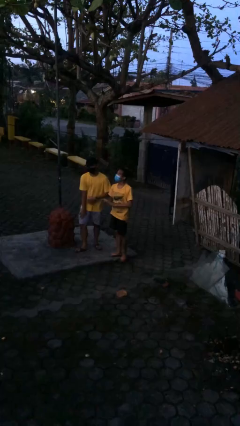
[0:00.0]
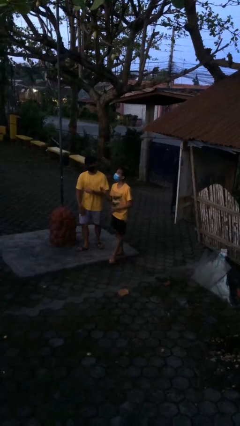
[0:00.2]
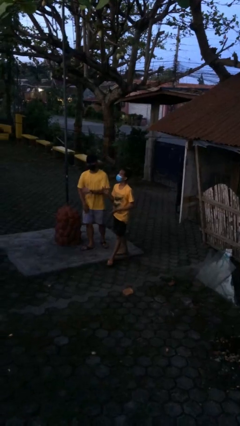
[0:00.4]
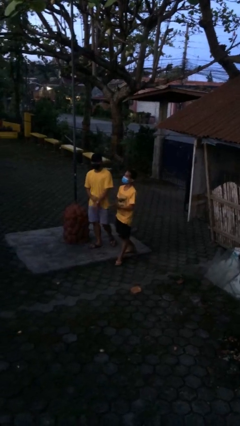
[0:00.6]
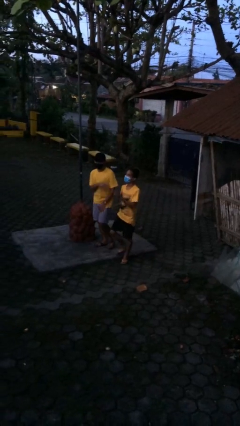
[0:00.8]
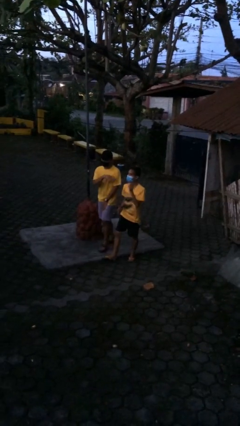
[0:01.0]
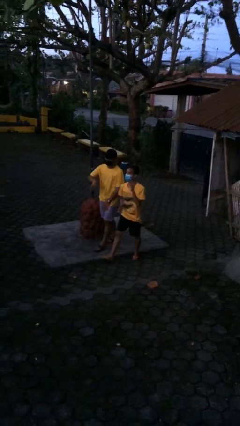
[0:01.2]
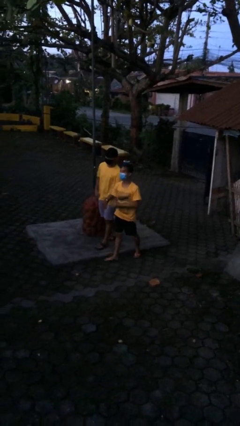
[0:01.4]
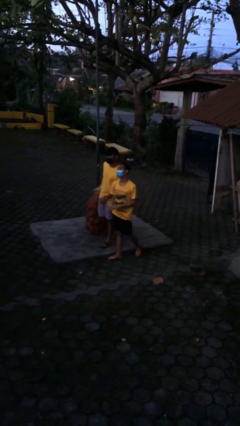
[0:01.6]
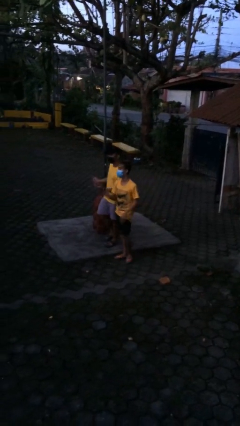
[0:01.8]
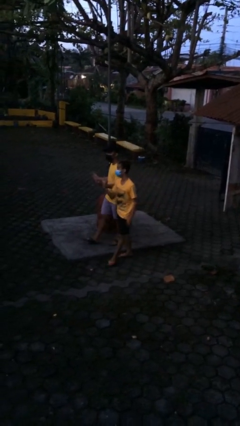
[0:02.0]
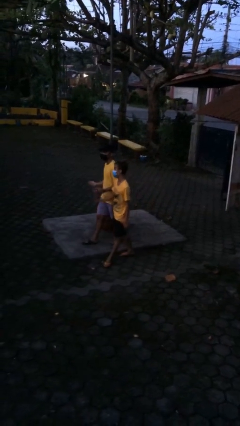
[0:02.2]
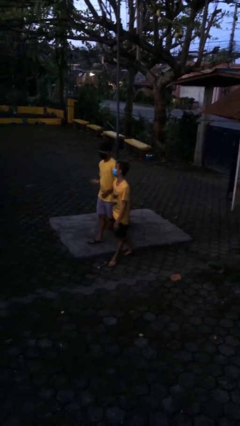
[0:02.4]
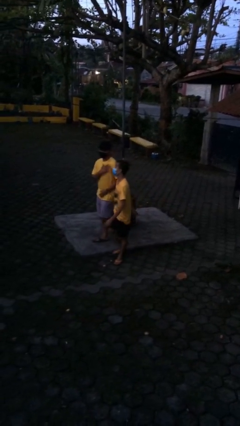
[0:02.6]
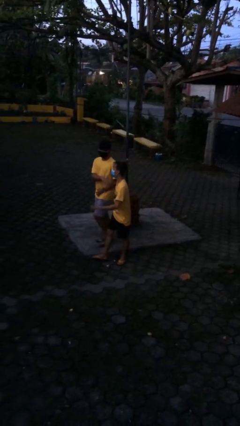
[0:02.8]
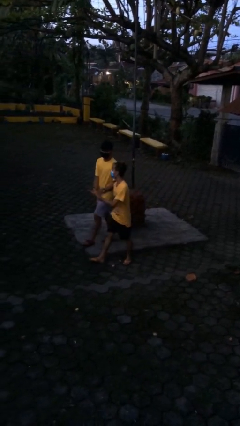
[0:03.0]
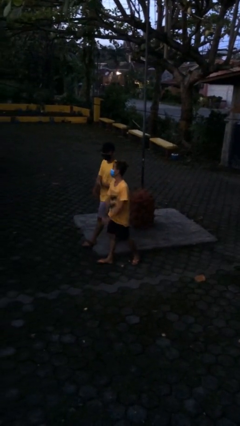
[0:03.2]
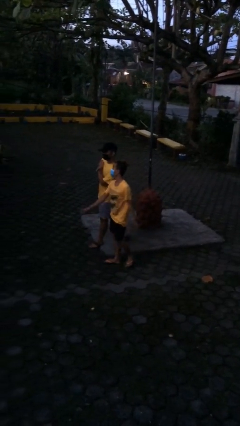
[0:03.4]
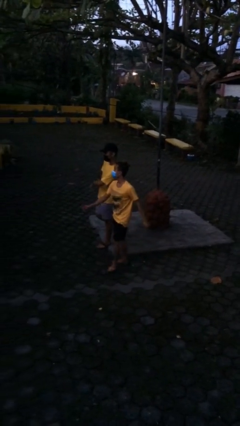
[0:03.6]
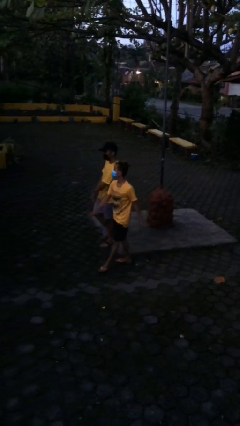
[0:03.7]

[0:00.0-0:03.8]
person talks to person

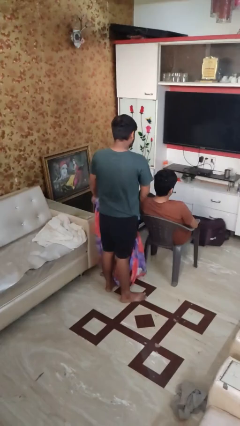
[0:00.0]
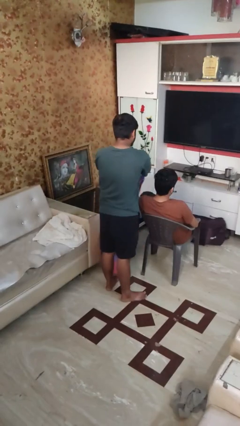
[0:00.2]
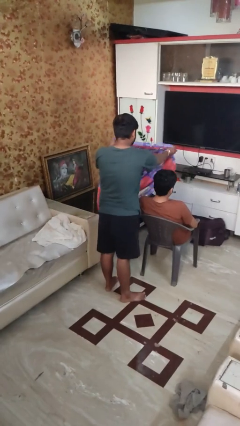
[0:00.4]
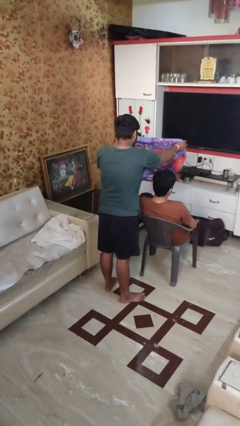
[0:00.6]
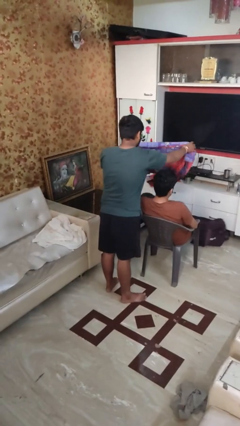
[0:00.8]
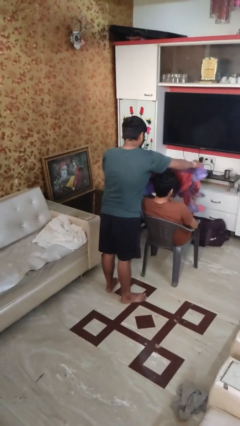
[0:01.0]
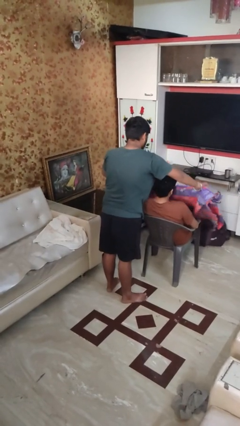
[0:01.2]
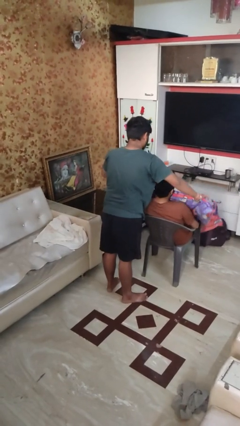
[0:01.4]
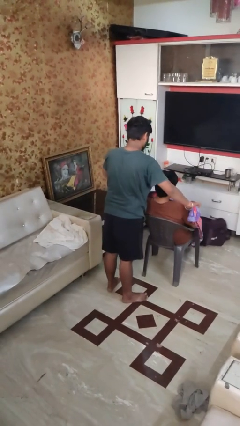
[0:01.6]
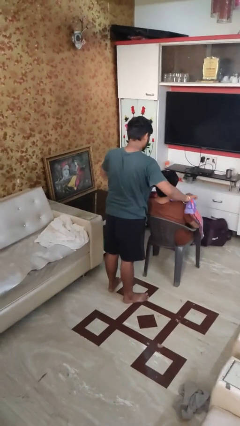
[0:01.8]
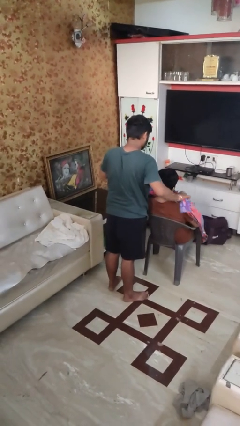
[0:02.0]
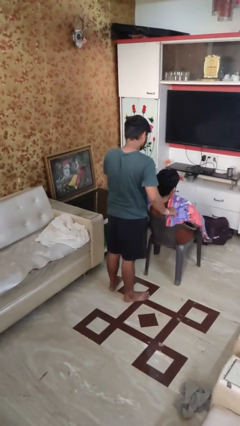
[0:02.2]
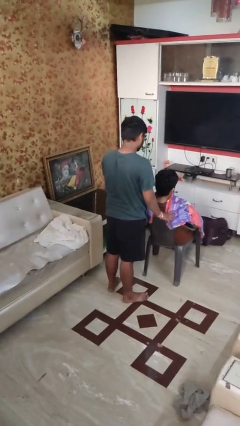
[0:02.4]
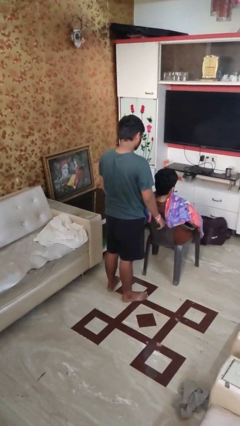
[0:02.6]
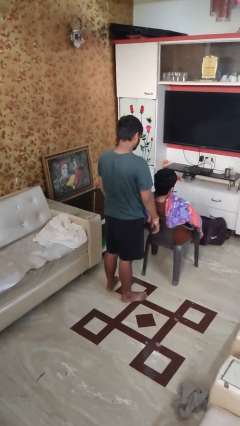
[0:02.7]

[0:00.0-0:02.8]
person covers friend with blanket

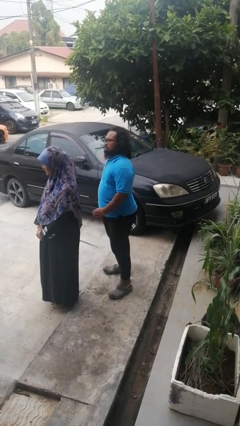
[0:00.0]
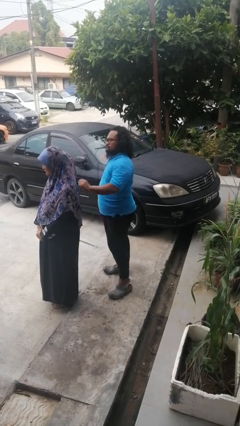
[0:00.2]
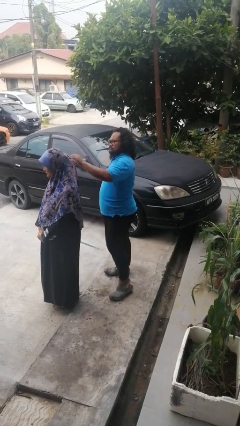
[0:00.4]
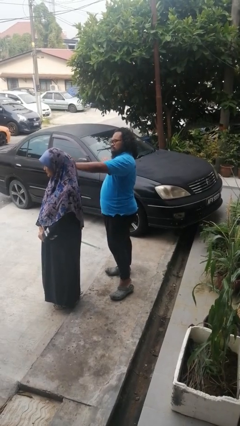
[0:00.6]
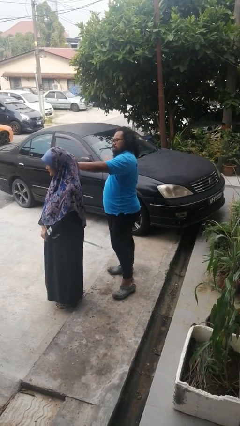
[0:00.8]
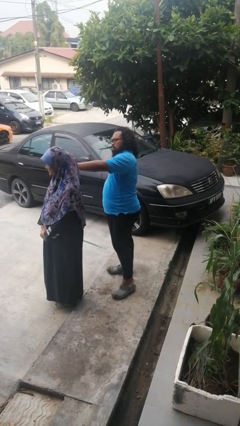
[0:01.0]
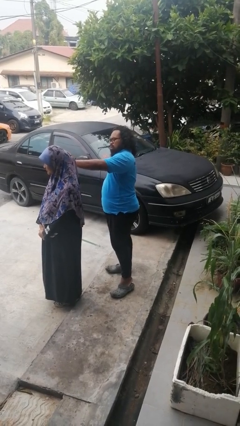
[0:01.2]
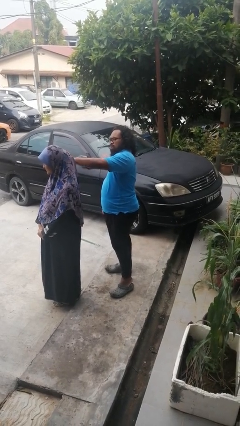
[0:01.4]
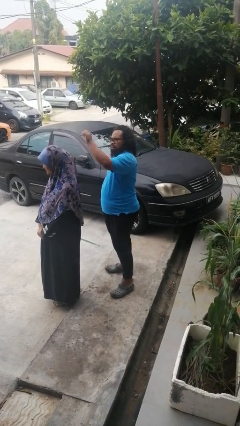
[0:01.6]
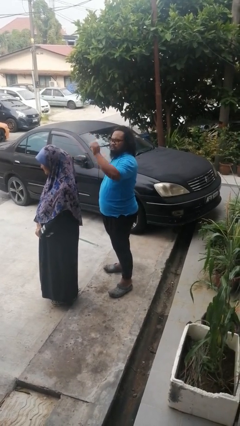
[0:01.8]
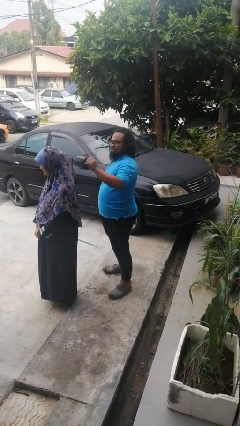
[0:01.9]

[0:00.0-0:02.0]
person touches back of person

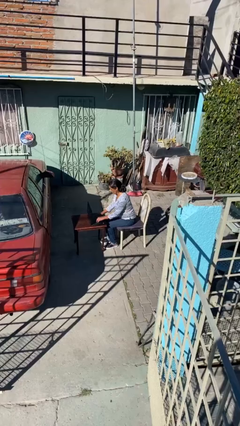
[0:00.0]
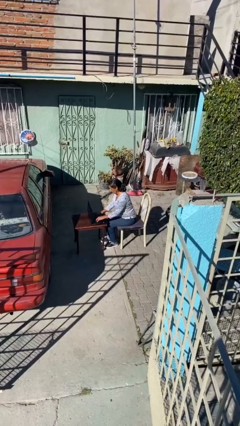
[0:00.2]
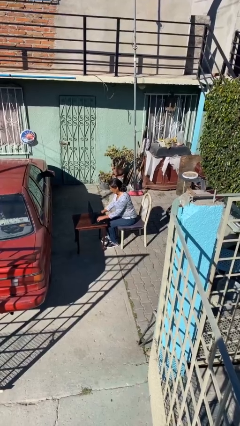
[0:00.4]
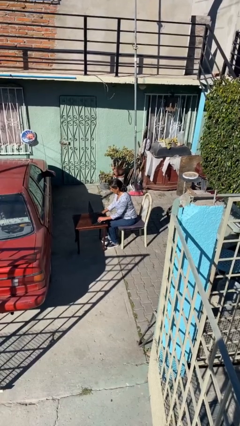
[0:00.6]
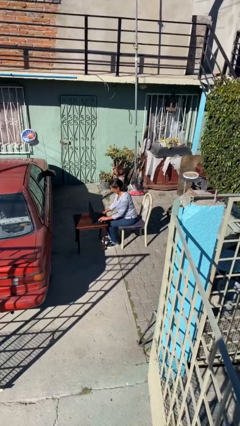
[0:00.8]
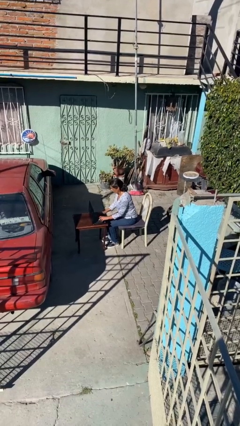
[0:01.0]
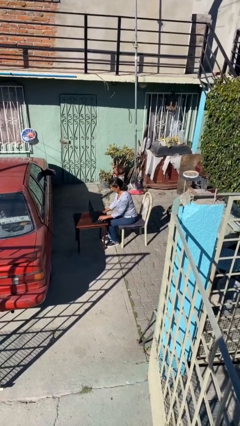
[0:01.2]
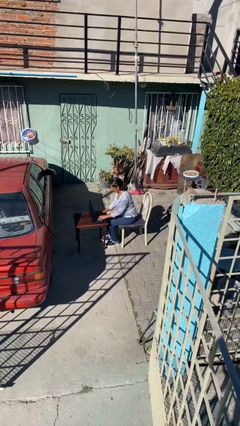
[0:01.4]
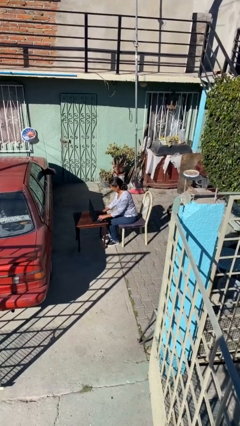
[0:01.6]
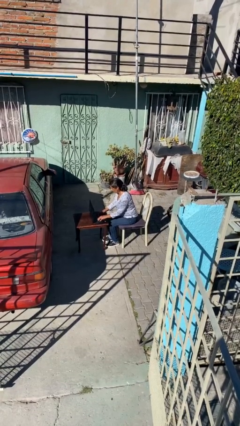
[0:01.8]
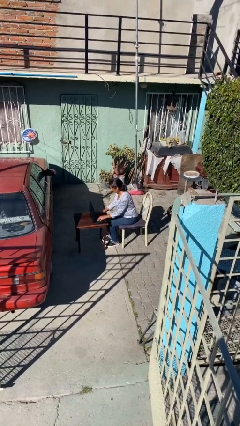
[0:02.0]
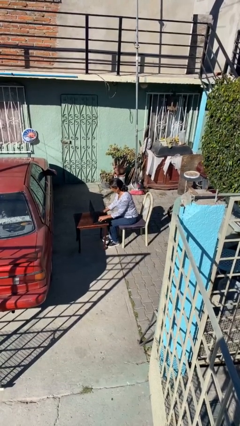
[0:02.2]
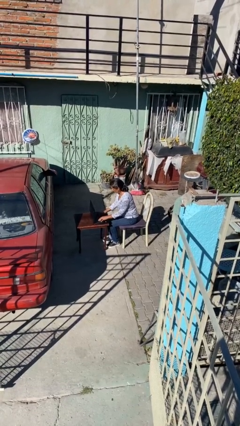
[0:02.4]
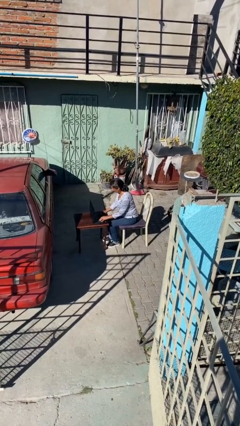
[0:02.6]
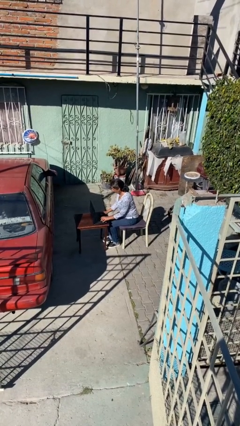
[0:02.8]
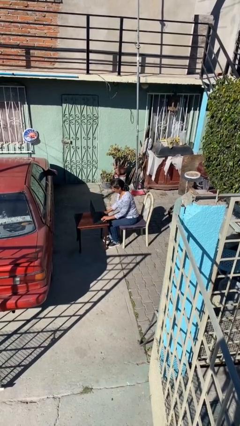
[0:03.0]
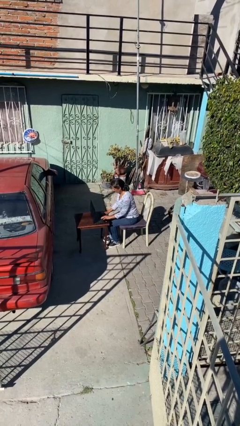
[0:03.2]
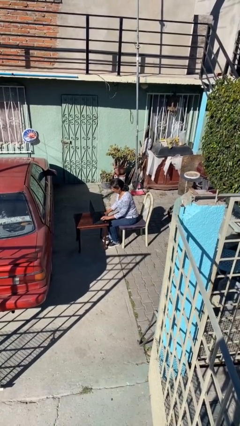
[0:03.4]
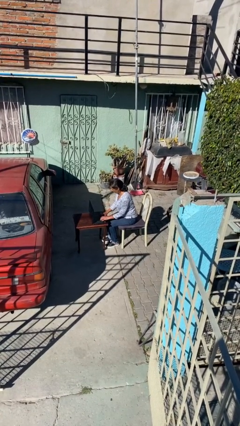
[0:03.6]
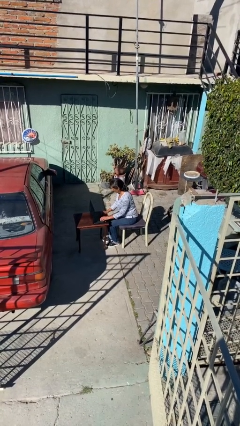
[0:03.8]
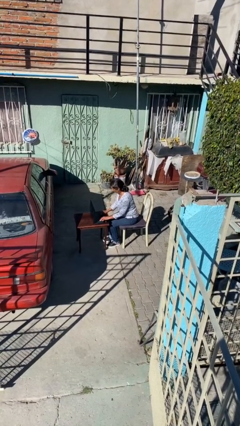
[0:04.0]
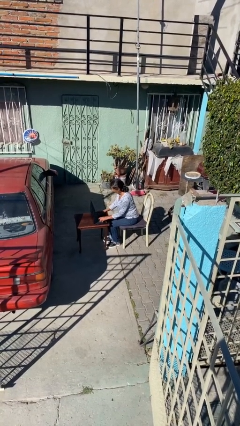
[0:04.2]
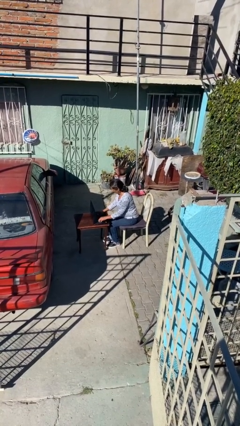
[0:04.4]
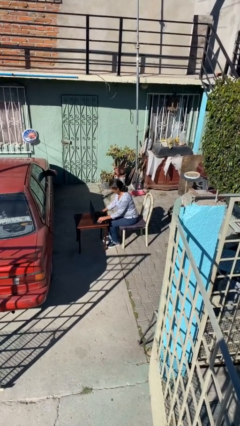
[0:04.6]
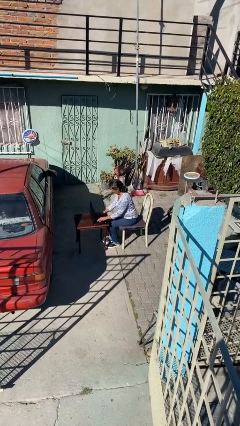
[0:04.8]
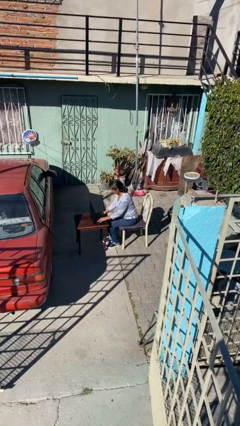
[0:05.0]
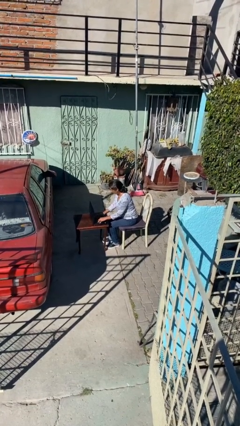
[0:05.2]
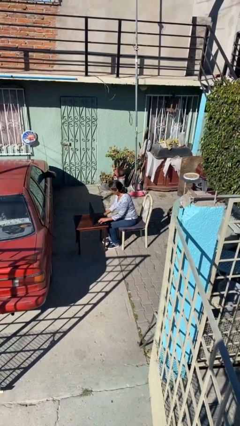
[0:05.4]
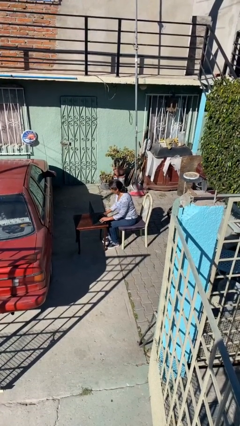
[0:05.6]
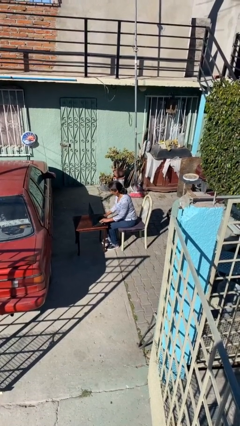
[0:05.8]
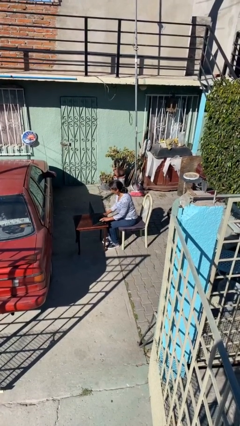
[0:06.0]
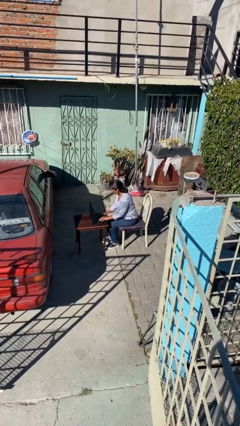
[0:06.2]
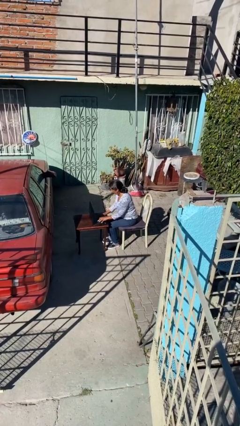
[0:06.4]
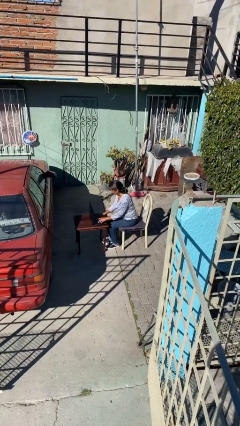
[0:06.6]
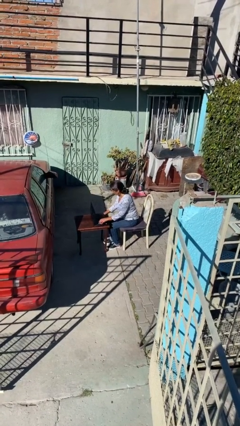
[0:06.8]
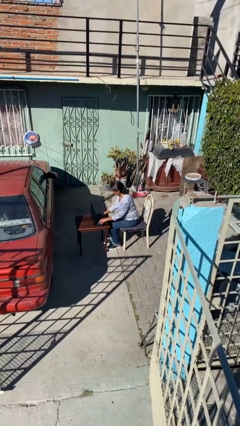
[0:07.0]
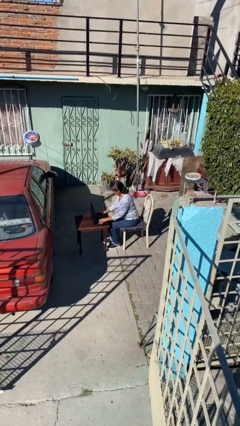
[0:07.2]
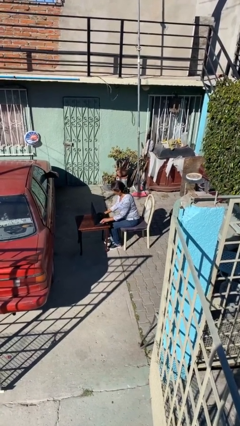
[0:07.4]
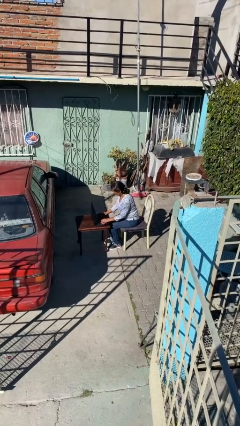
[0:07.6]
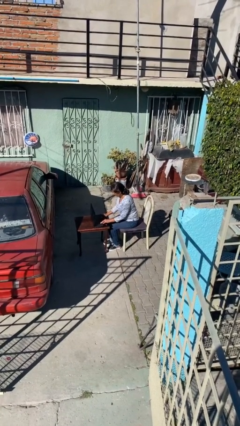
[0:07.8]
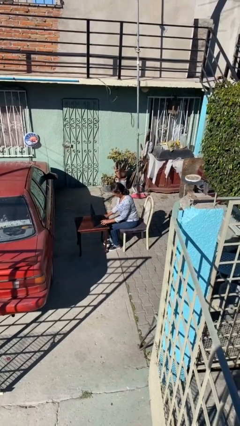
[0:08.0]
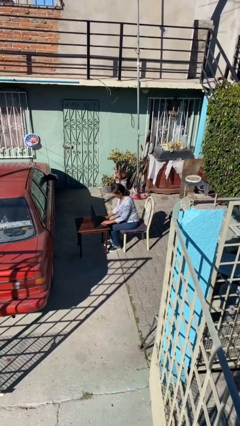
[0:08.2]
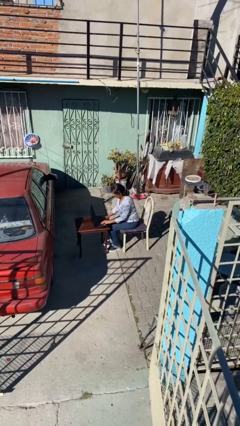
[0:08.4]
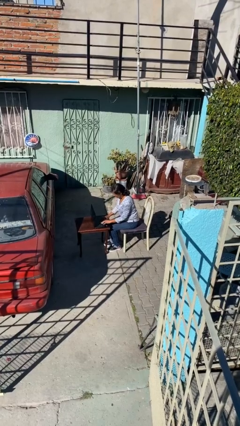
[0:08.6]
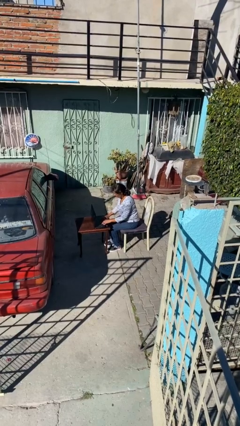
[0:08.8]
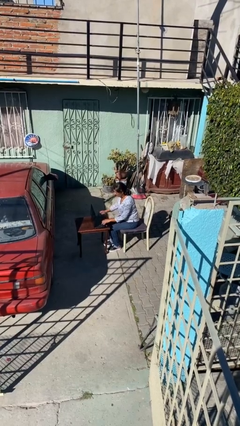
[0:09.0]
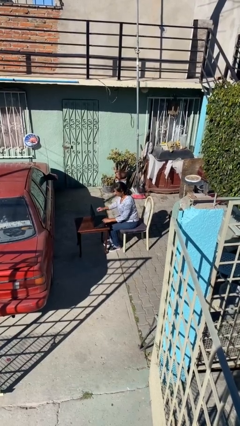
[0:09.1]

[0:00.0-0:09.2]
person interacts with laptop
